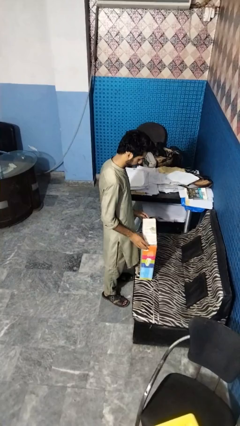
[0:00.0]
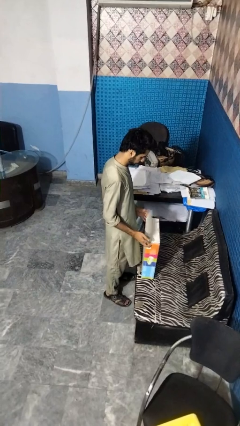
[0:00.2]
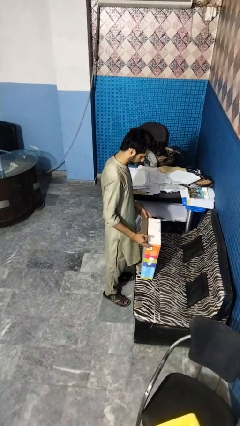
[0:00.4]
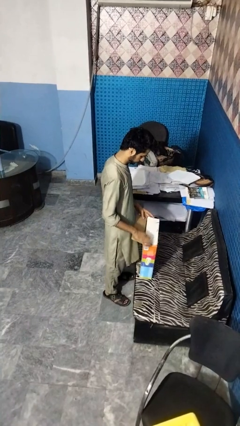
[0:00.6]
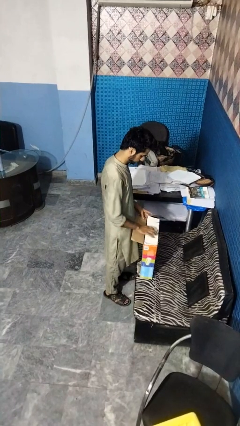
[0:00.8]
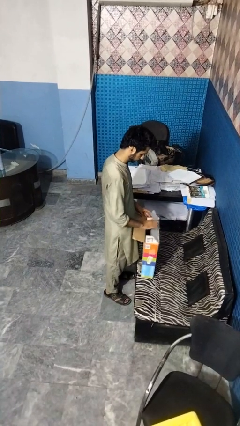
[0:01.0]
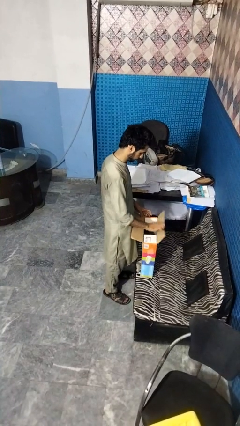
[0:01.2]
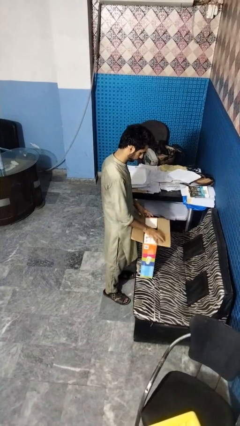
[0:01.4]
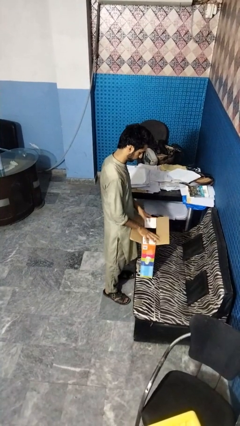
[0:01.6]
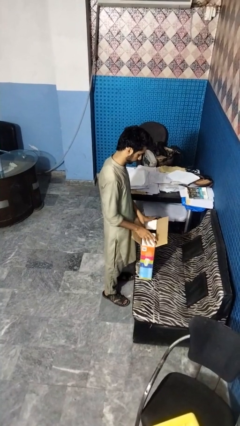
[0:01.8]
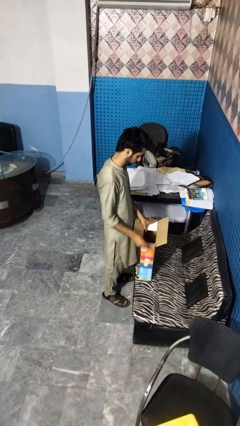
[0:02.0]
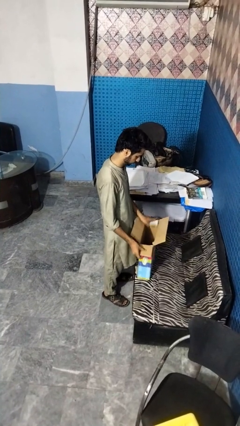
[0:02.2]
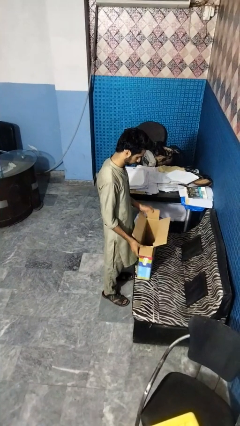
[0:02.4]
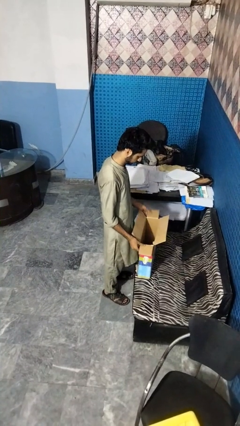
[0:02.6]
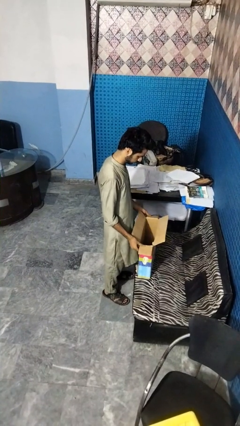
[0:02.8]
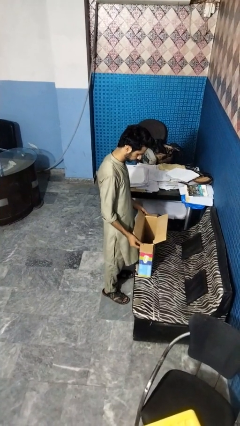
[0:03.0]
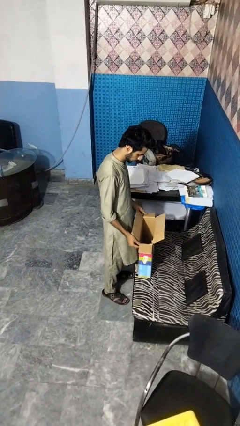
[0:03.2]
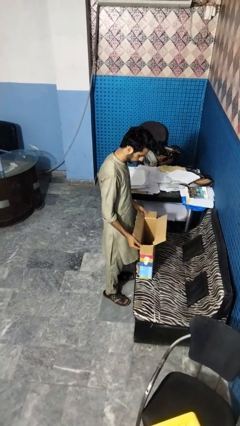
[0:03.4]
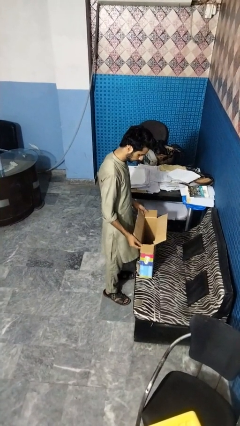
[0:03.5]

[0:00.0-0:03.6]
person opens box

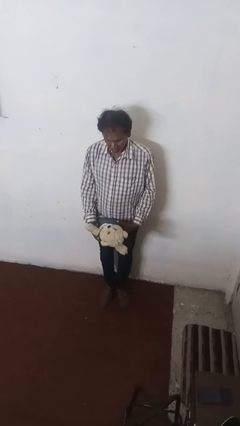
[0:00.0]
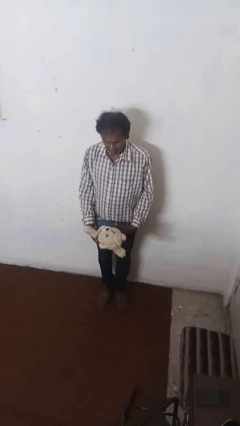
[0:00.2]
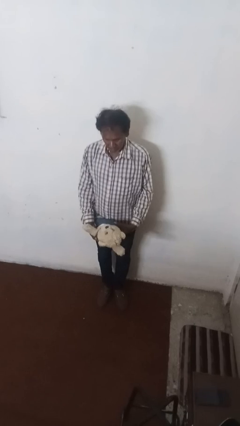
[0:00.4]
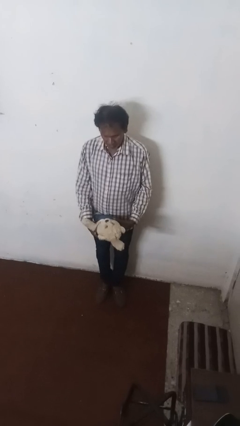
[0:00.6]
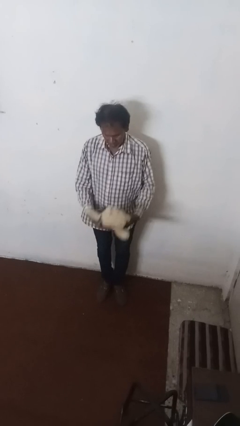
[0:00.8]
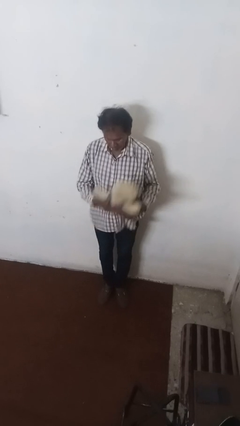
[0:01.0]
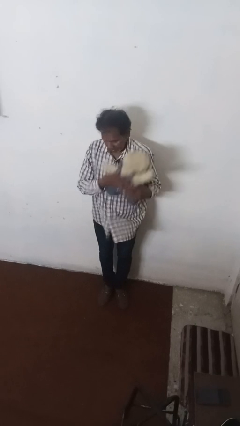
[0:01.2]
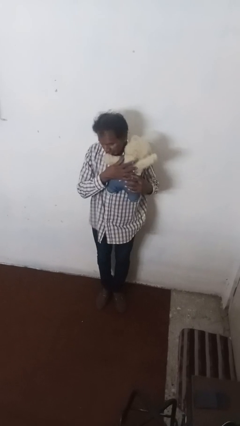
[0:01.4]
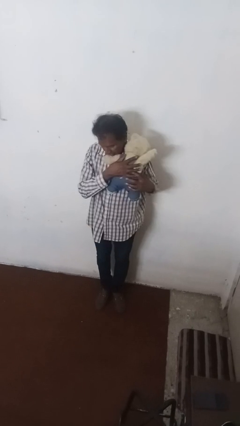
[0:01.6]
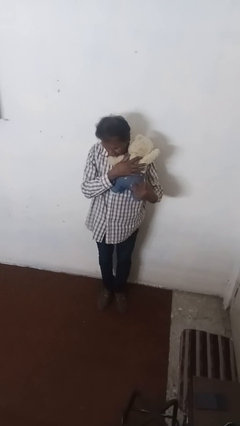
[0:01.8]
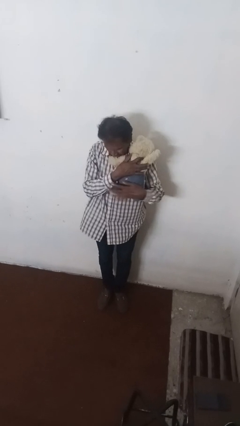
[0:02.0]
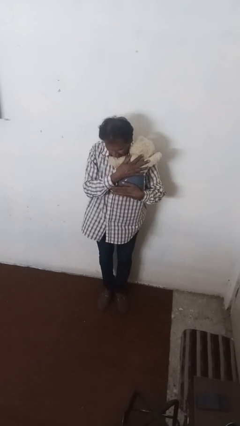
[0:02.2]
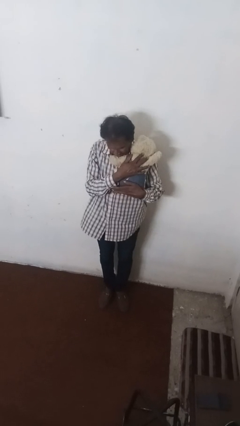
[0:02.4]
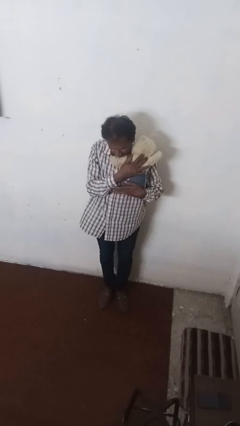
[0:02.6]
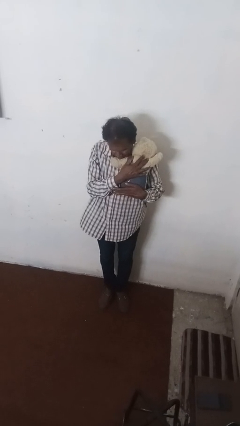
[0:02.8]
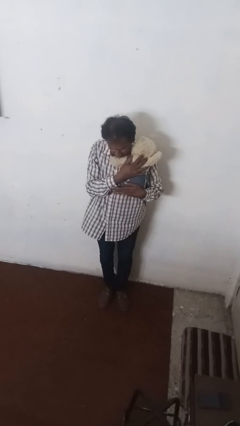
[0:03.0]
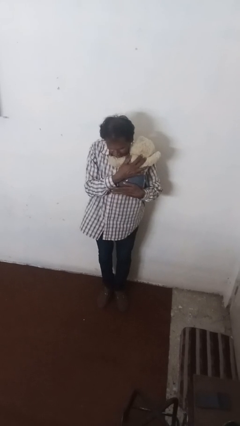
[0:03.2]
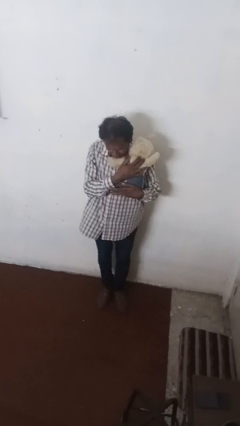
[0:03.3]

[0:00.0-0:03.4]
person hugs stuffed animal

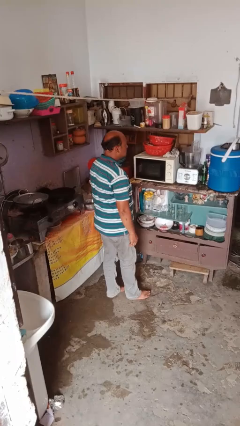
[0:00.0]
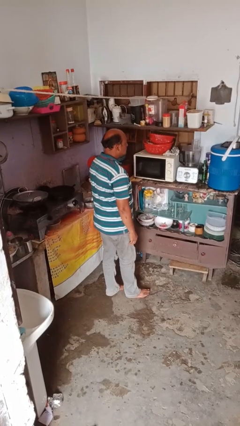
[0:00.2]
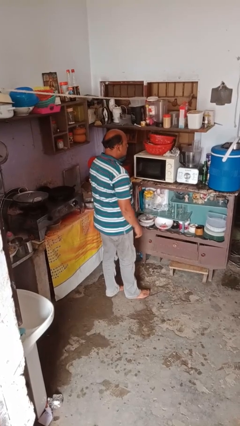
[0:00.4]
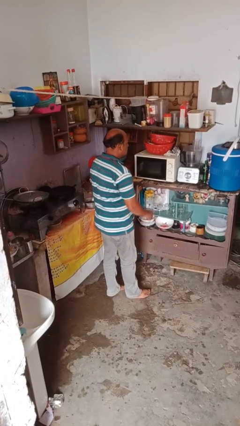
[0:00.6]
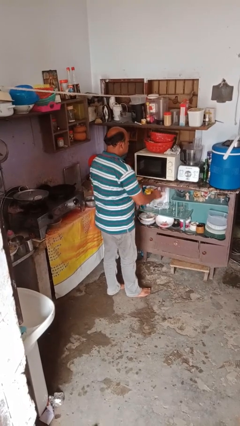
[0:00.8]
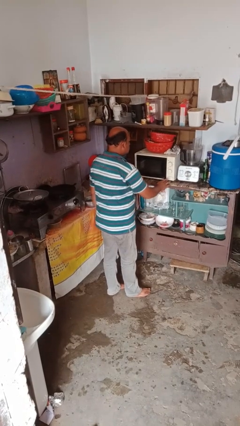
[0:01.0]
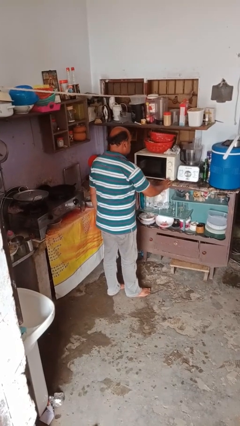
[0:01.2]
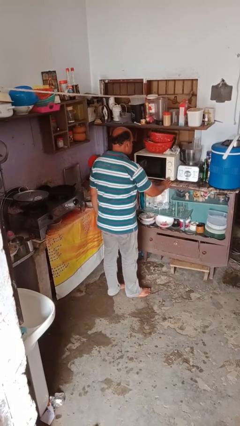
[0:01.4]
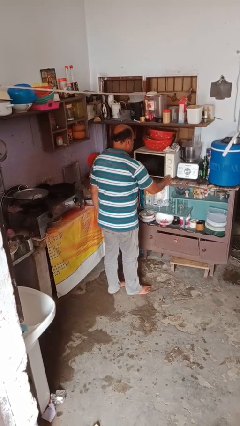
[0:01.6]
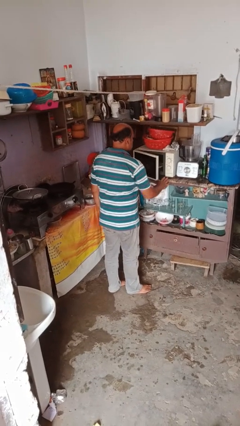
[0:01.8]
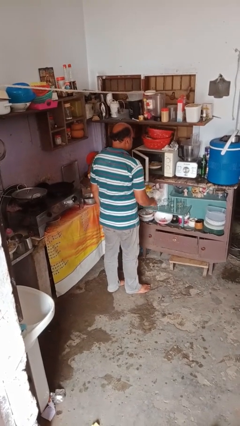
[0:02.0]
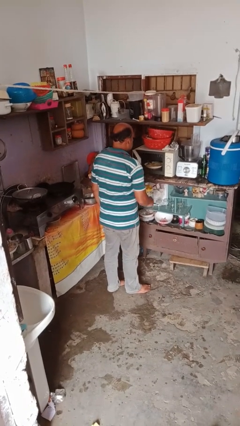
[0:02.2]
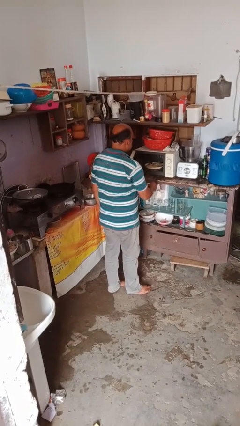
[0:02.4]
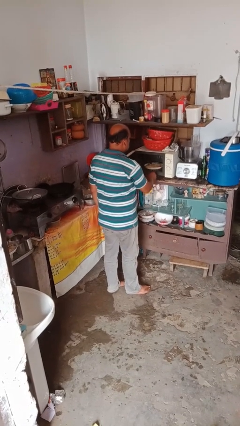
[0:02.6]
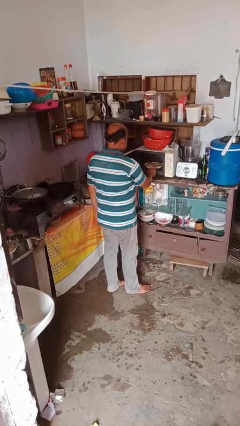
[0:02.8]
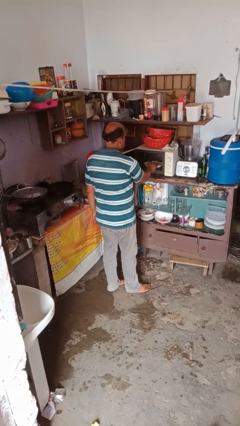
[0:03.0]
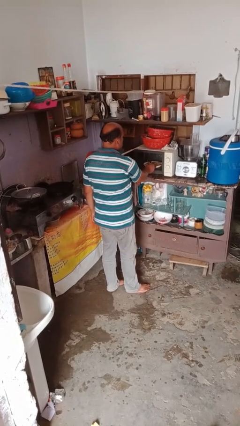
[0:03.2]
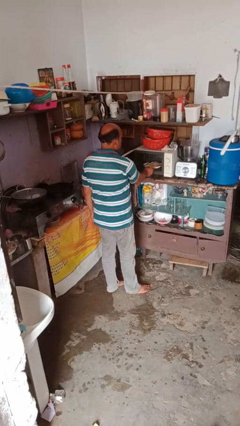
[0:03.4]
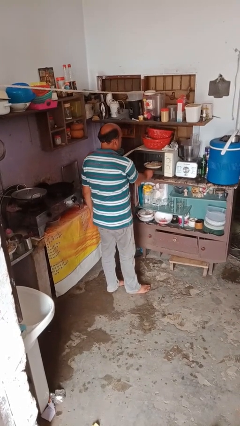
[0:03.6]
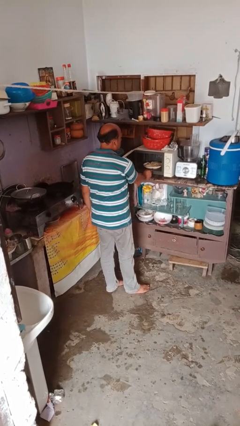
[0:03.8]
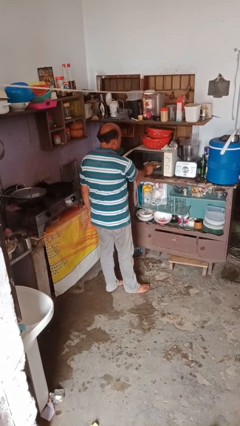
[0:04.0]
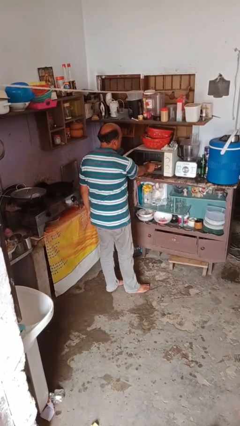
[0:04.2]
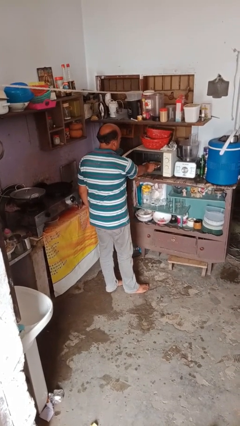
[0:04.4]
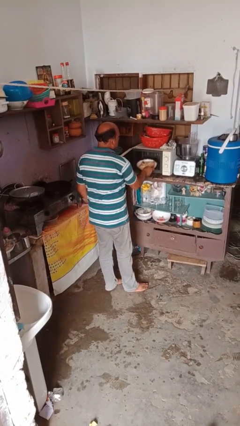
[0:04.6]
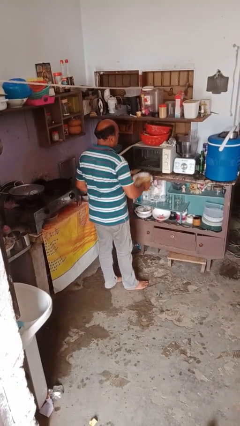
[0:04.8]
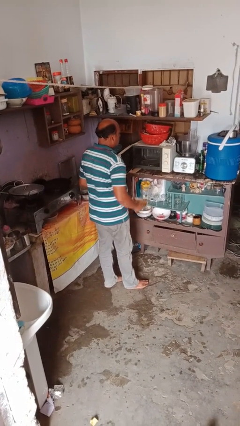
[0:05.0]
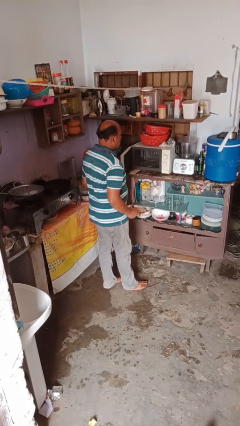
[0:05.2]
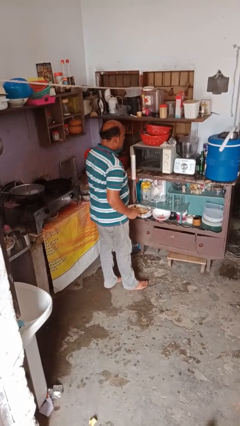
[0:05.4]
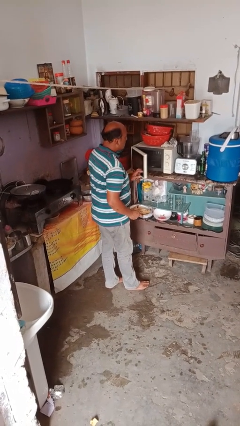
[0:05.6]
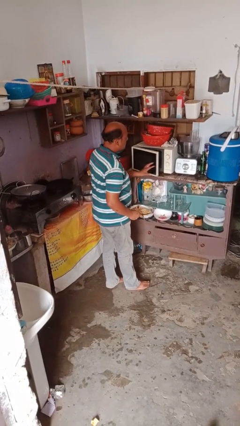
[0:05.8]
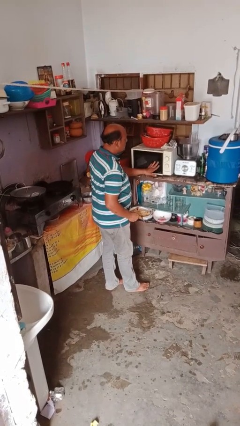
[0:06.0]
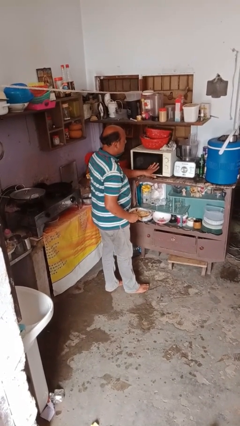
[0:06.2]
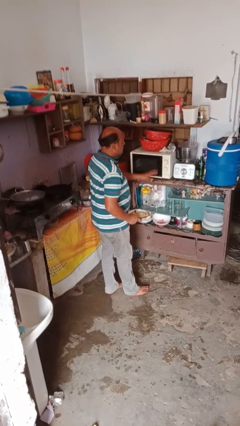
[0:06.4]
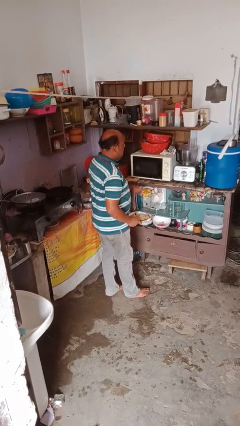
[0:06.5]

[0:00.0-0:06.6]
person takes object from microwave

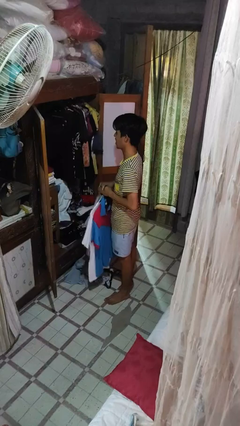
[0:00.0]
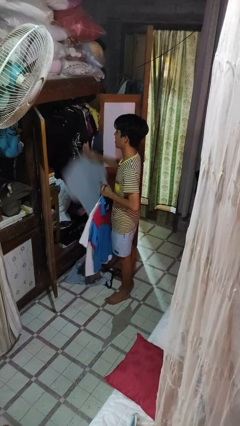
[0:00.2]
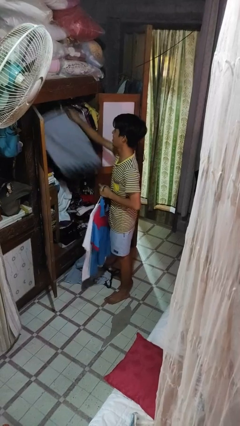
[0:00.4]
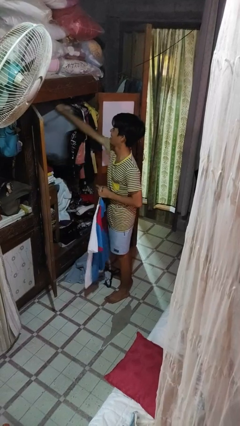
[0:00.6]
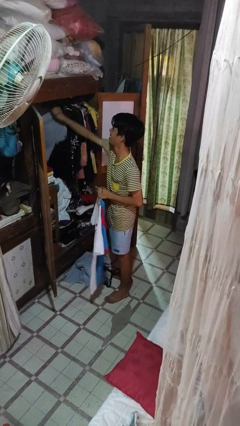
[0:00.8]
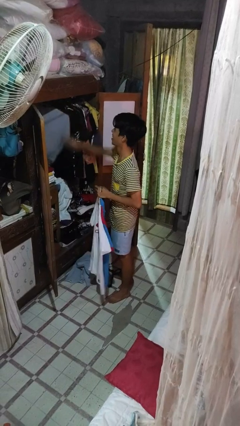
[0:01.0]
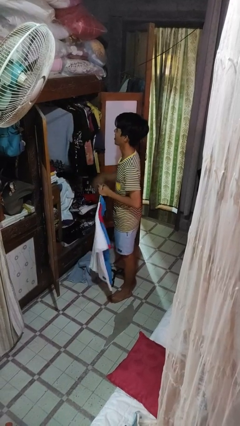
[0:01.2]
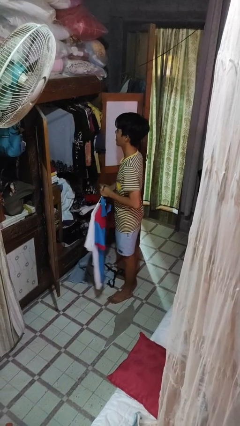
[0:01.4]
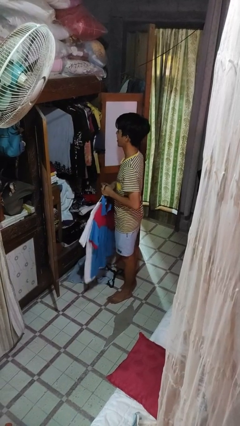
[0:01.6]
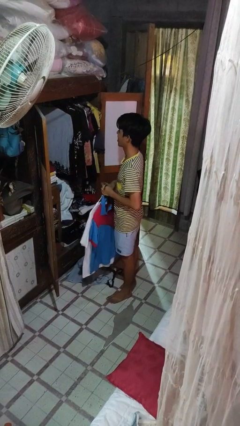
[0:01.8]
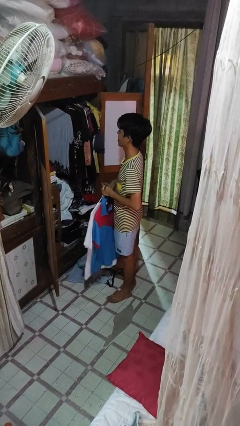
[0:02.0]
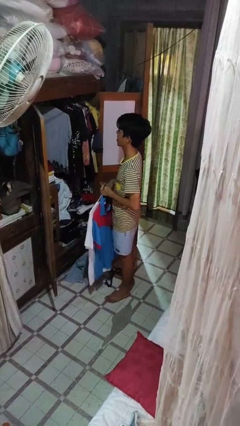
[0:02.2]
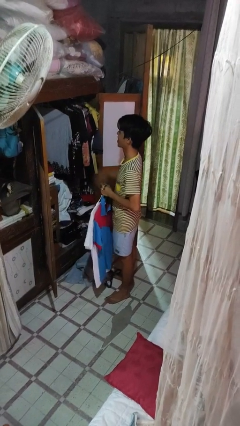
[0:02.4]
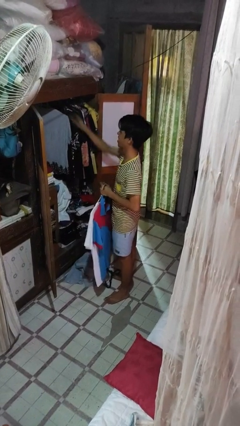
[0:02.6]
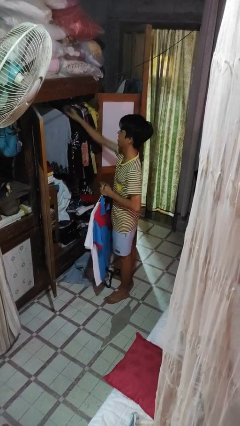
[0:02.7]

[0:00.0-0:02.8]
person puts clothes into closet

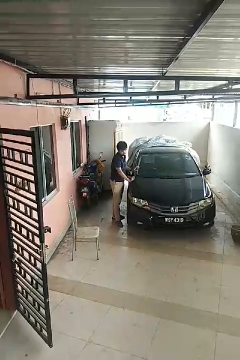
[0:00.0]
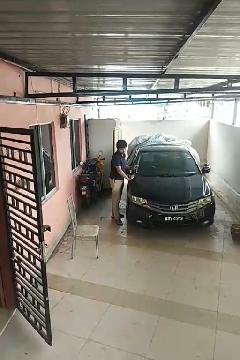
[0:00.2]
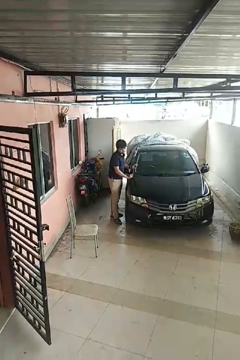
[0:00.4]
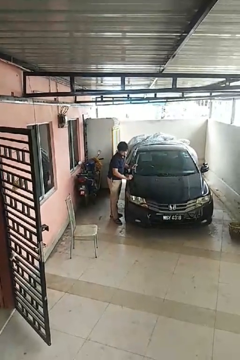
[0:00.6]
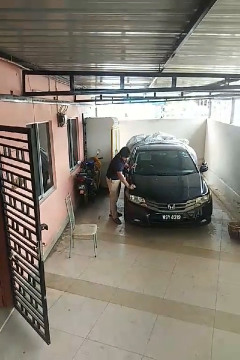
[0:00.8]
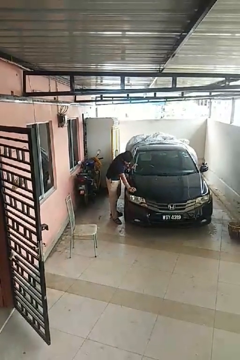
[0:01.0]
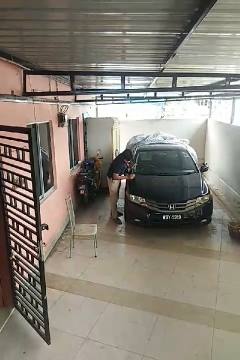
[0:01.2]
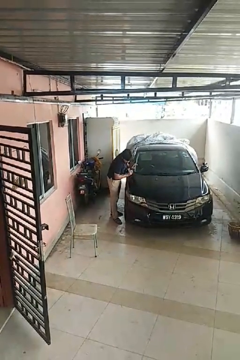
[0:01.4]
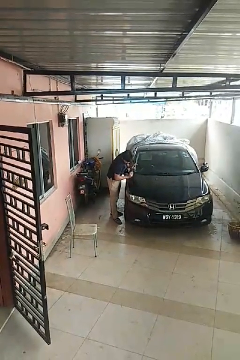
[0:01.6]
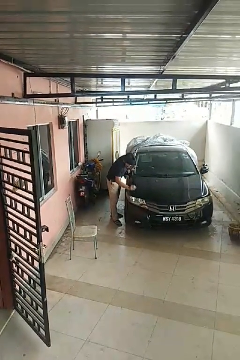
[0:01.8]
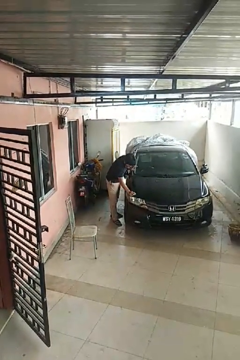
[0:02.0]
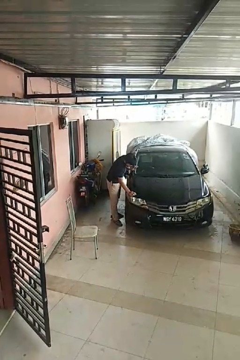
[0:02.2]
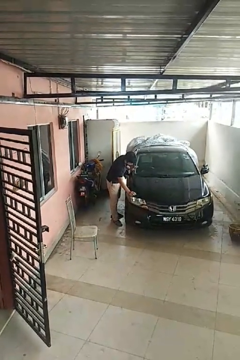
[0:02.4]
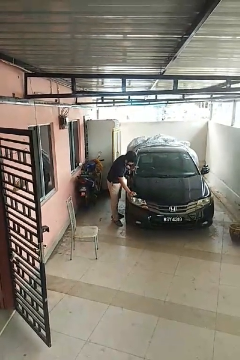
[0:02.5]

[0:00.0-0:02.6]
person polishes car with rag
